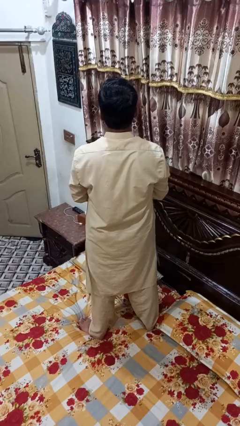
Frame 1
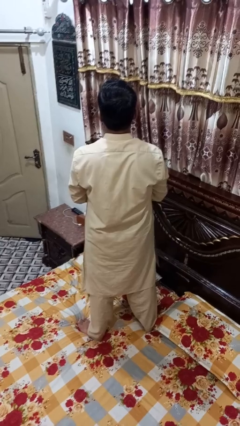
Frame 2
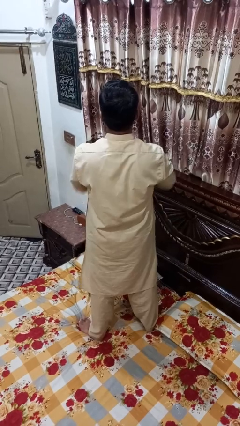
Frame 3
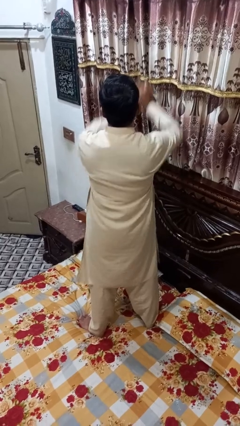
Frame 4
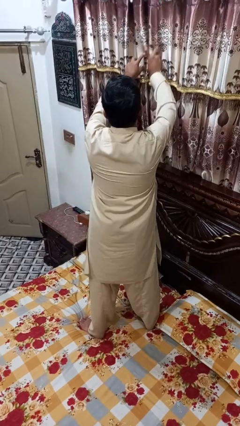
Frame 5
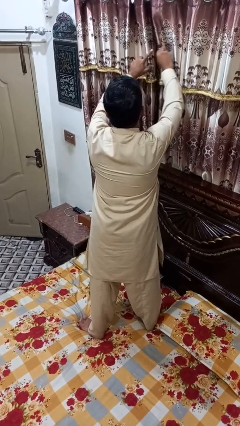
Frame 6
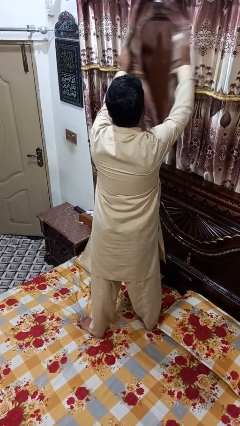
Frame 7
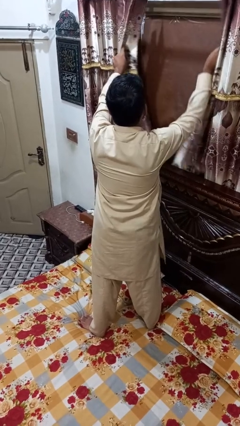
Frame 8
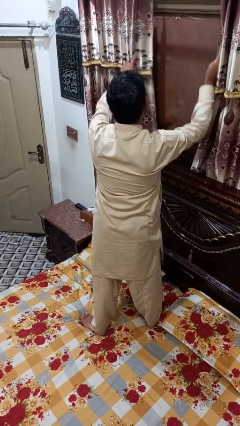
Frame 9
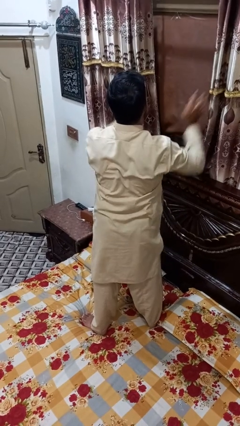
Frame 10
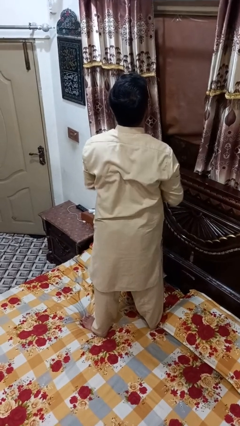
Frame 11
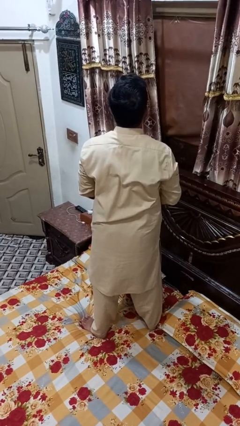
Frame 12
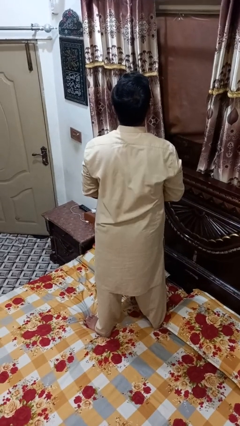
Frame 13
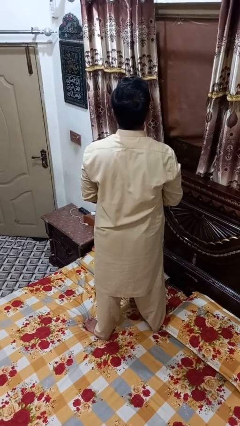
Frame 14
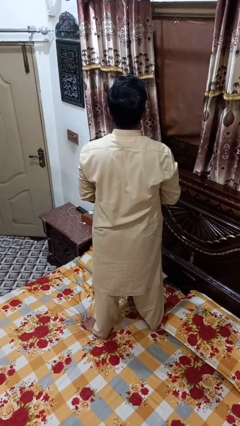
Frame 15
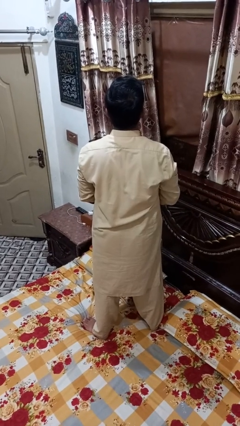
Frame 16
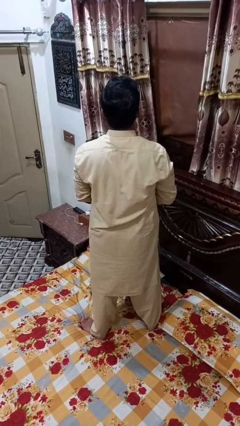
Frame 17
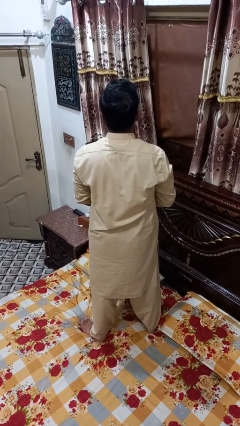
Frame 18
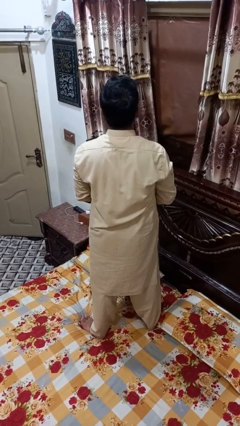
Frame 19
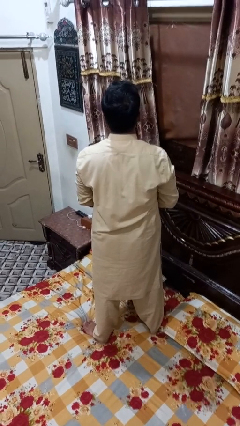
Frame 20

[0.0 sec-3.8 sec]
person opens curtains

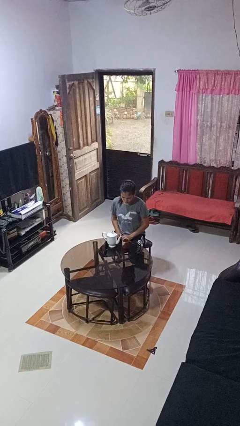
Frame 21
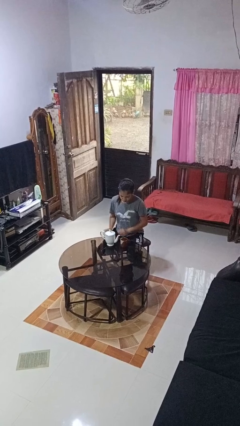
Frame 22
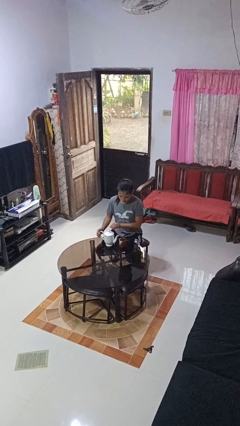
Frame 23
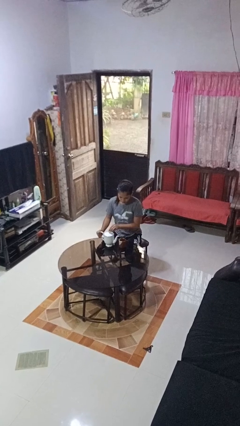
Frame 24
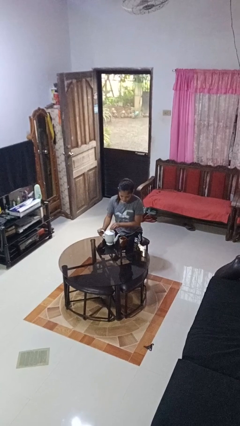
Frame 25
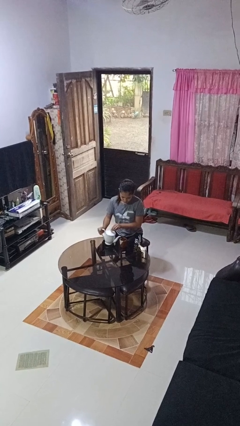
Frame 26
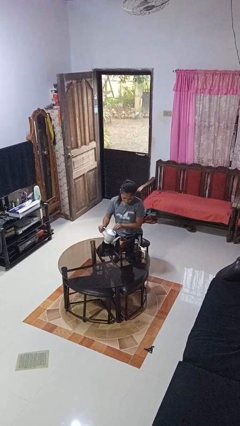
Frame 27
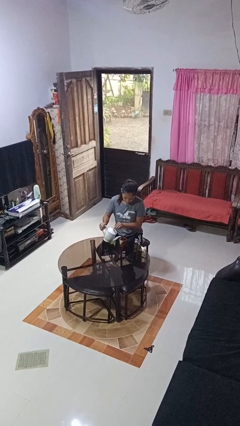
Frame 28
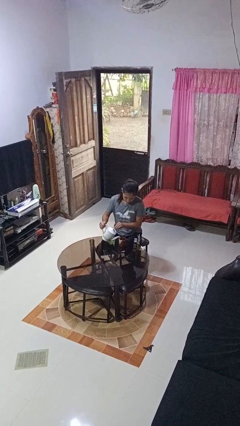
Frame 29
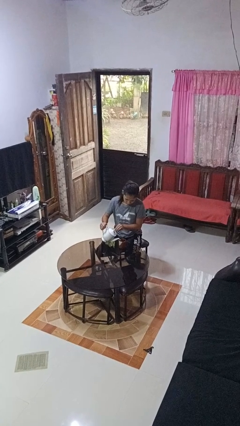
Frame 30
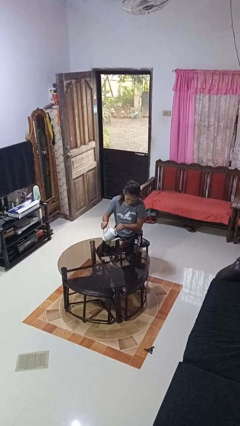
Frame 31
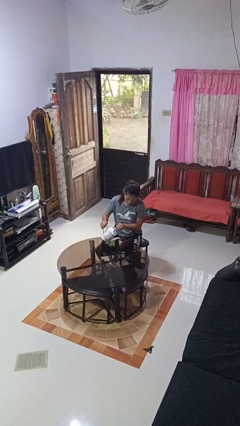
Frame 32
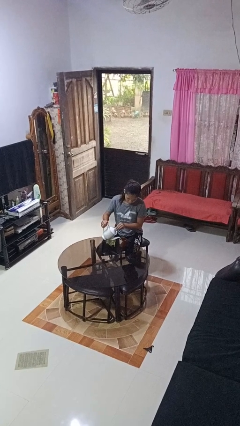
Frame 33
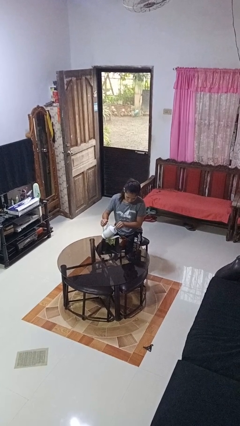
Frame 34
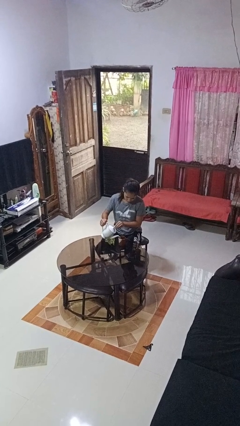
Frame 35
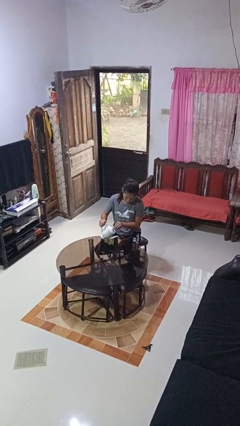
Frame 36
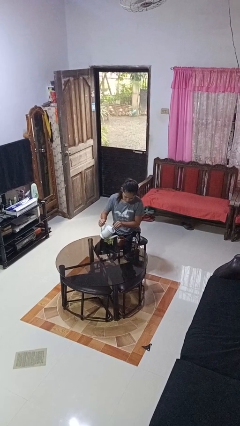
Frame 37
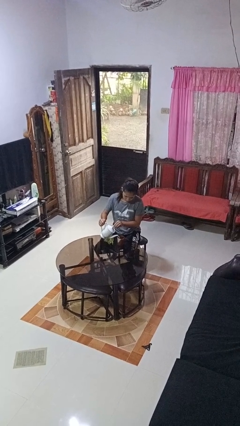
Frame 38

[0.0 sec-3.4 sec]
person pours coffee into mug

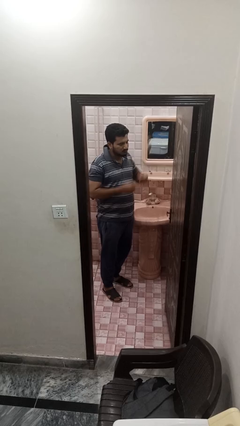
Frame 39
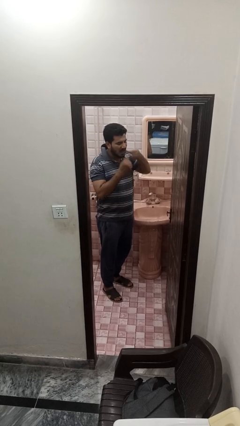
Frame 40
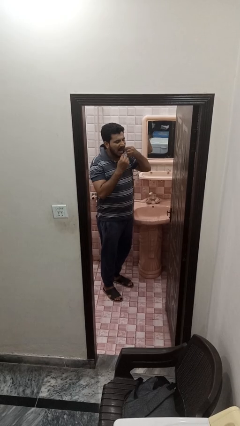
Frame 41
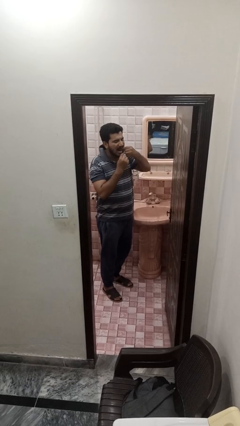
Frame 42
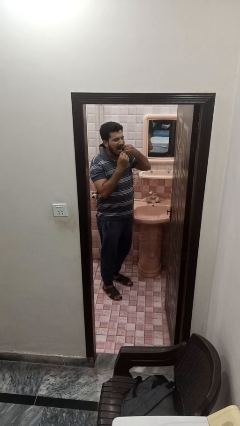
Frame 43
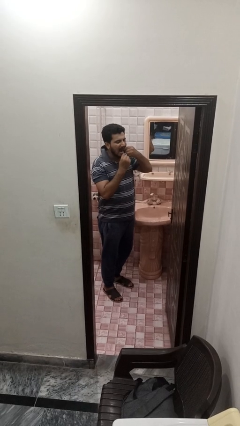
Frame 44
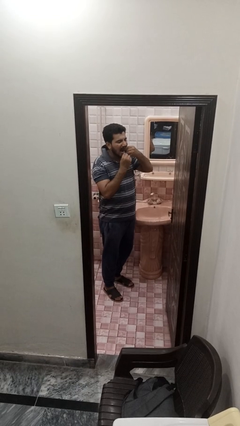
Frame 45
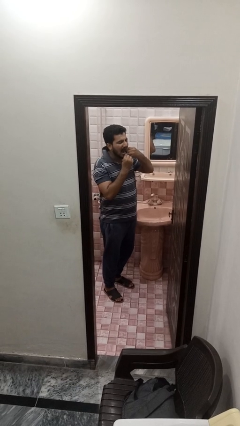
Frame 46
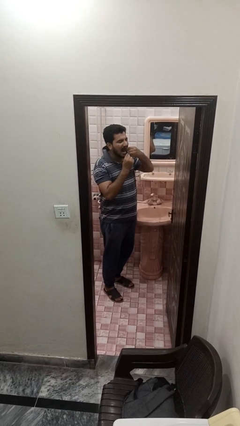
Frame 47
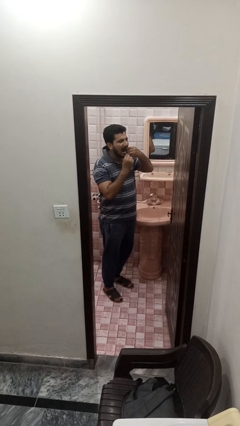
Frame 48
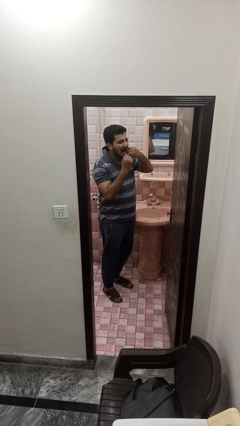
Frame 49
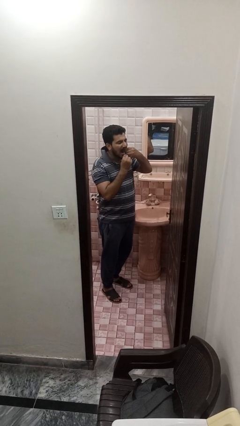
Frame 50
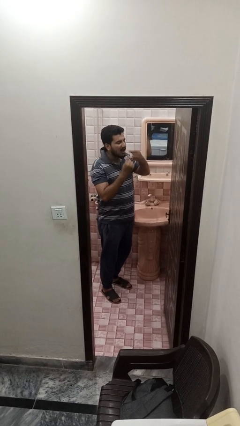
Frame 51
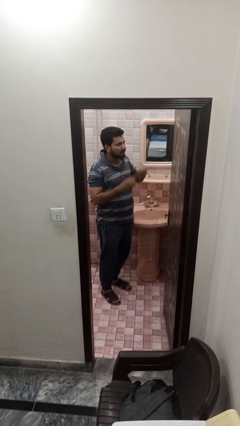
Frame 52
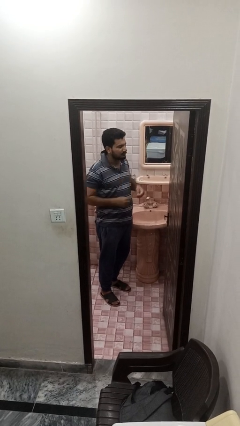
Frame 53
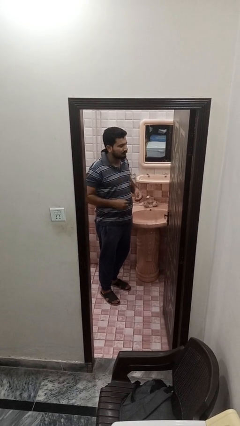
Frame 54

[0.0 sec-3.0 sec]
person flosses

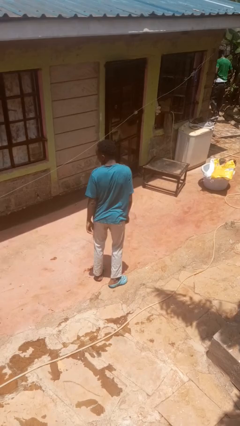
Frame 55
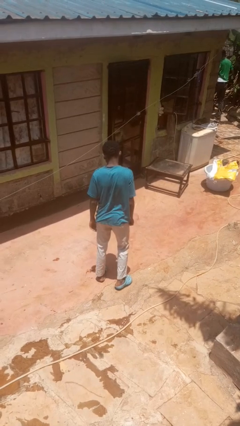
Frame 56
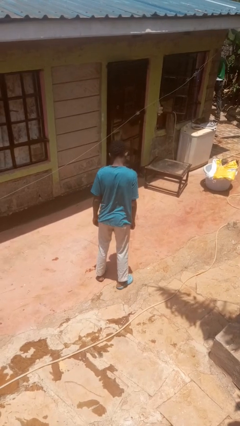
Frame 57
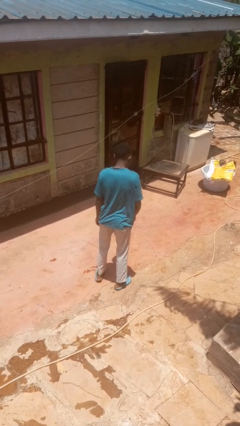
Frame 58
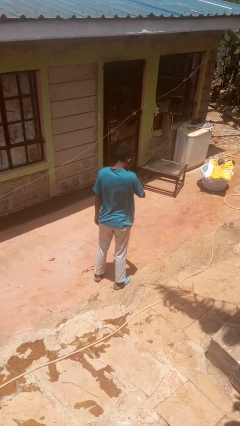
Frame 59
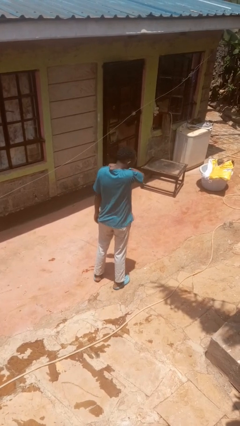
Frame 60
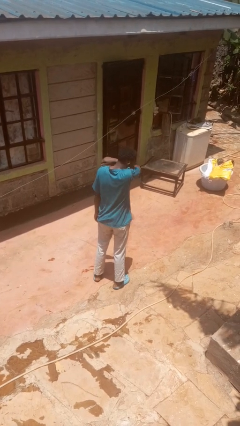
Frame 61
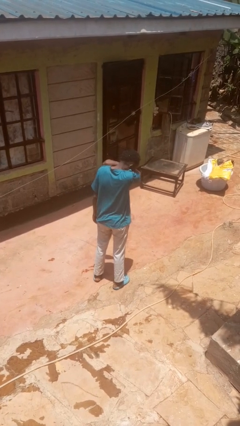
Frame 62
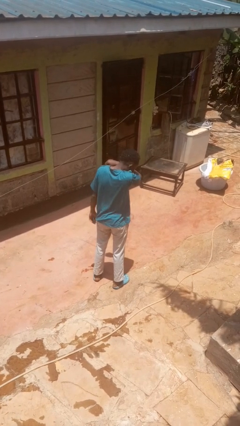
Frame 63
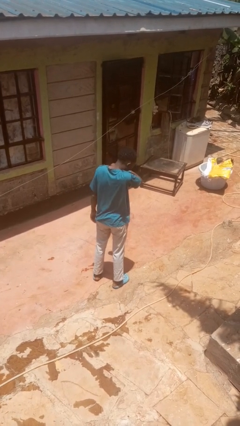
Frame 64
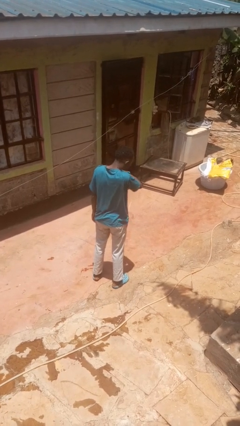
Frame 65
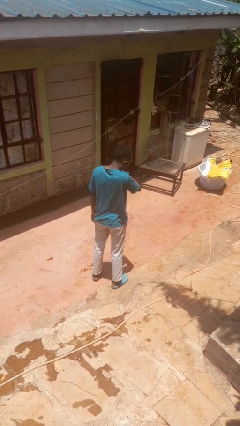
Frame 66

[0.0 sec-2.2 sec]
person sneezes into arm

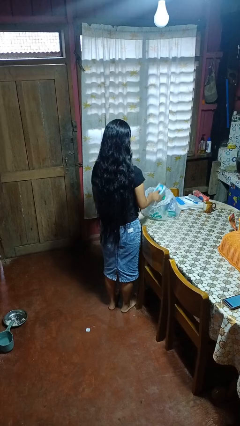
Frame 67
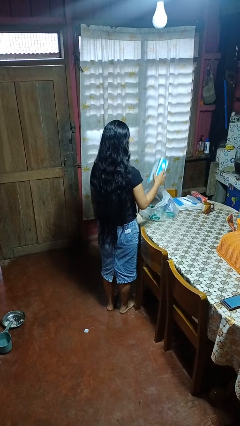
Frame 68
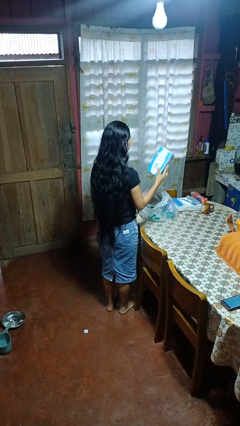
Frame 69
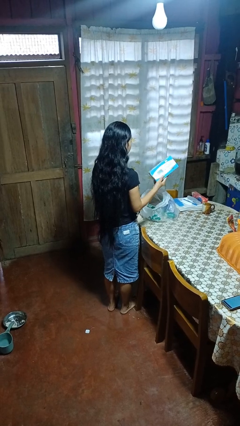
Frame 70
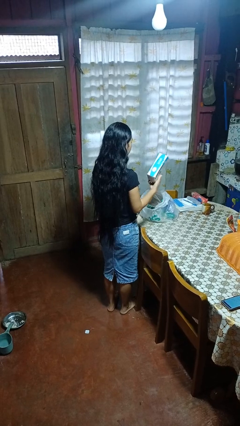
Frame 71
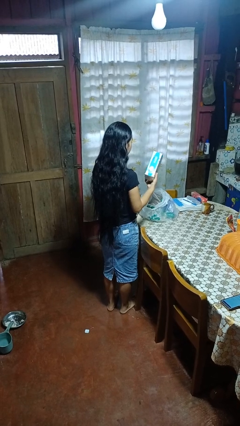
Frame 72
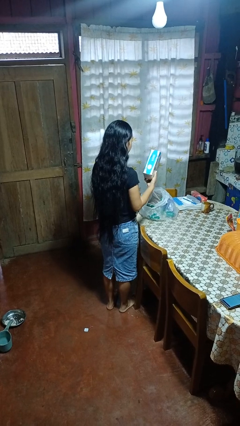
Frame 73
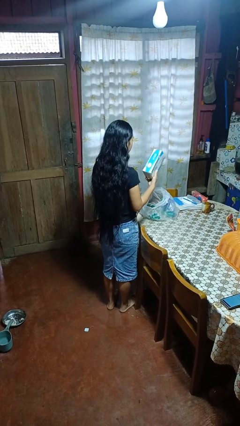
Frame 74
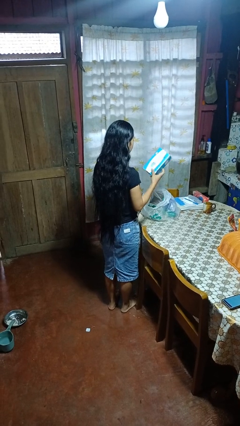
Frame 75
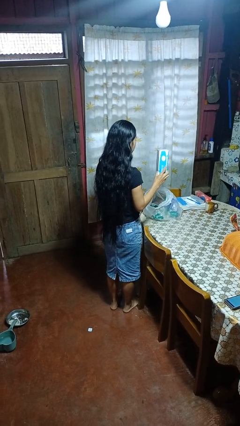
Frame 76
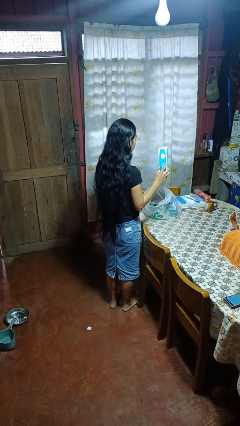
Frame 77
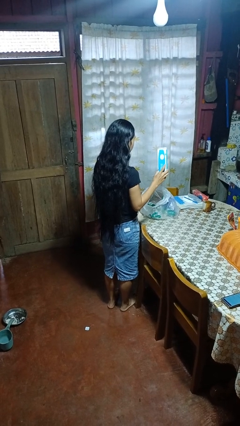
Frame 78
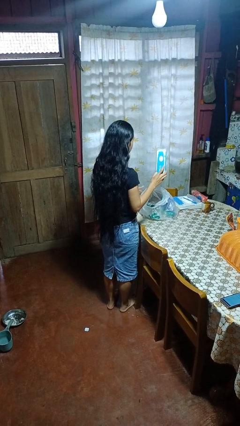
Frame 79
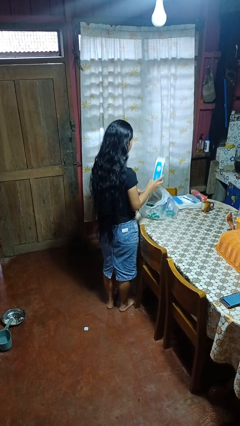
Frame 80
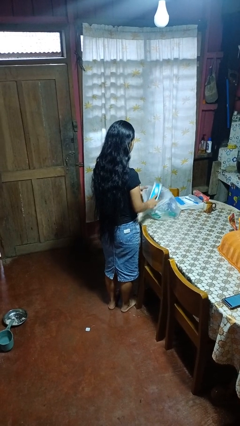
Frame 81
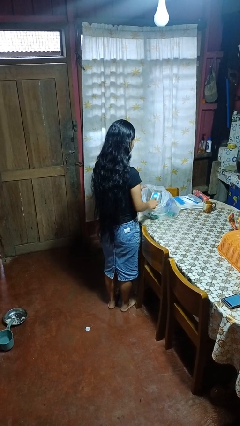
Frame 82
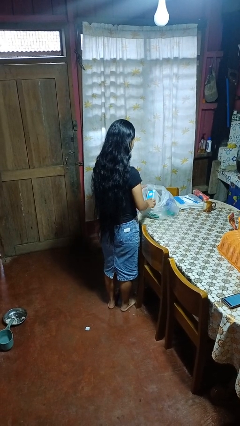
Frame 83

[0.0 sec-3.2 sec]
person takes object from bag

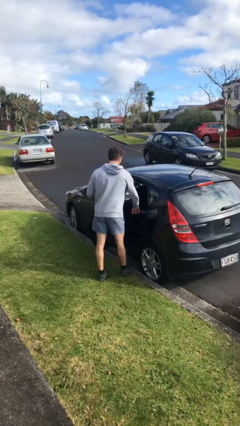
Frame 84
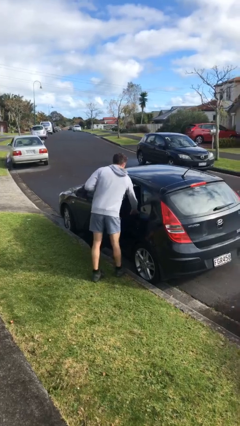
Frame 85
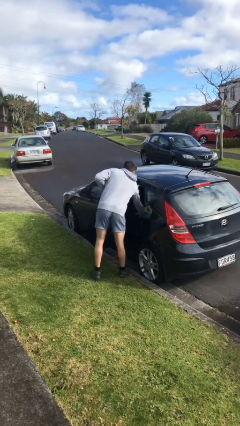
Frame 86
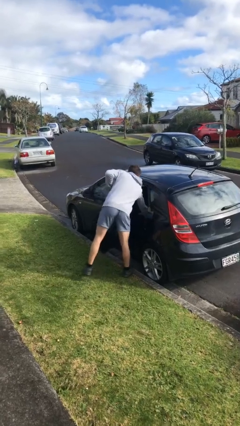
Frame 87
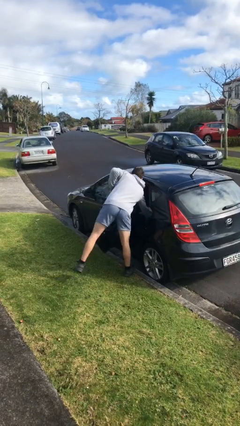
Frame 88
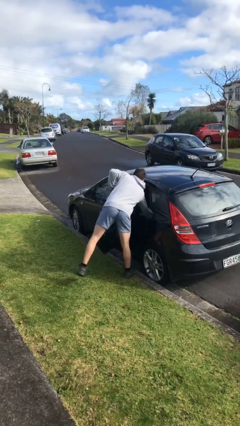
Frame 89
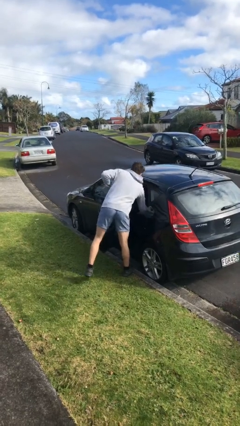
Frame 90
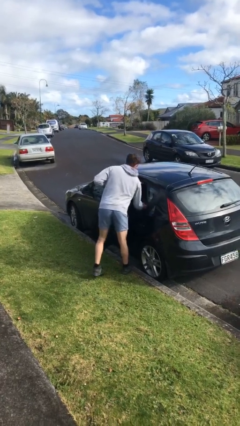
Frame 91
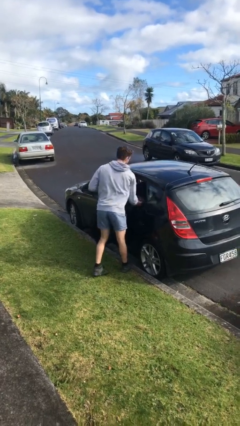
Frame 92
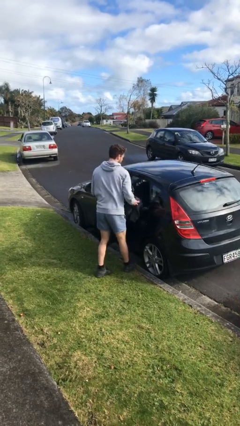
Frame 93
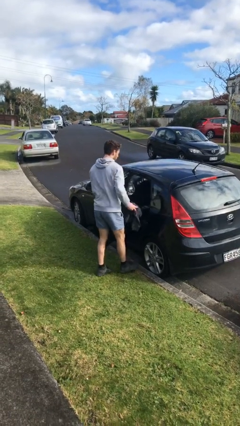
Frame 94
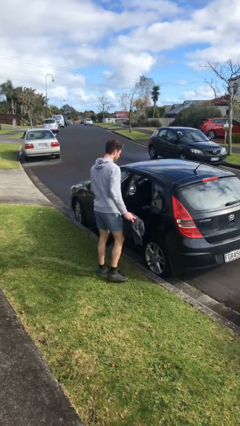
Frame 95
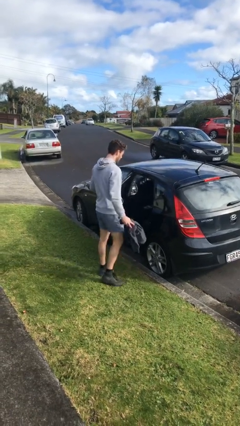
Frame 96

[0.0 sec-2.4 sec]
person unloads car
